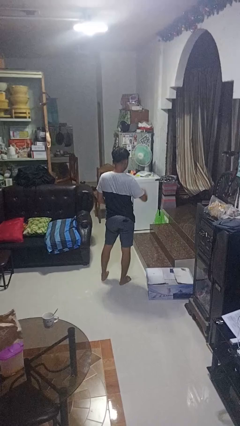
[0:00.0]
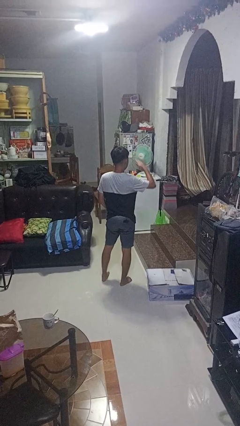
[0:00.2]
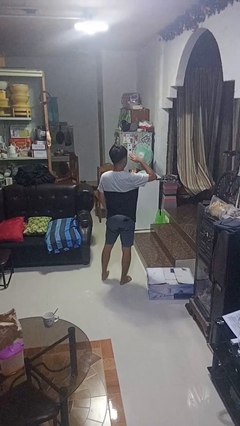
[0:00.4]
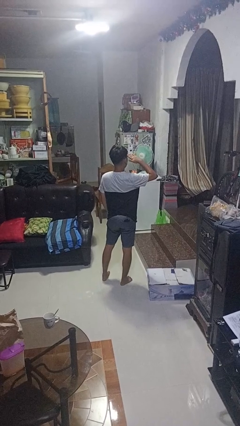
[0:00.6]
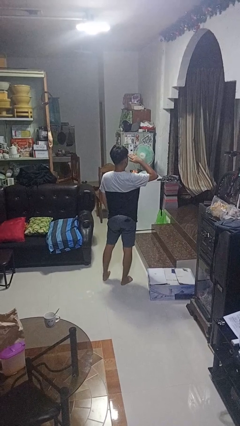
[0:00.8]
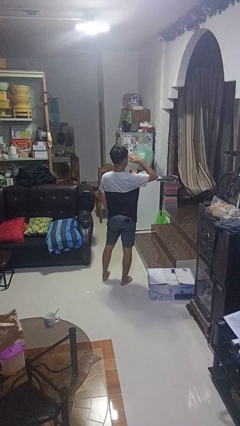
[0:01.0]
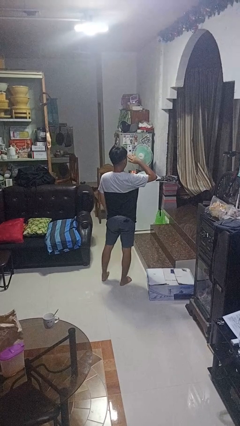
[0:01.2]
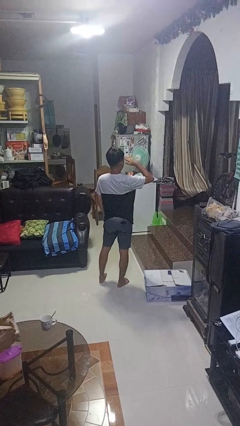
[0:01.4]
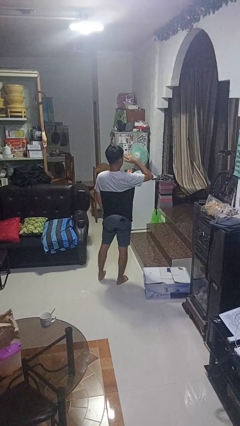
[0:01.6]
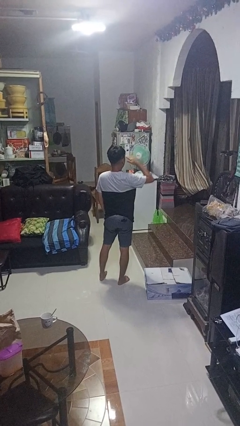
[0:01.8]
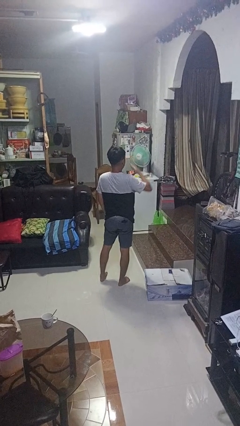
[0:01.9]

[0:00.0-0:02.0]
person salutes

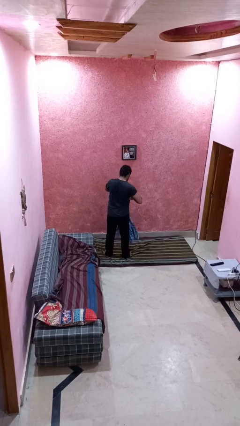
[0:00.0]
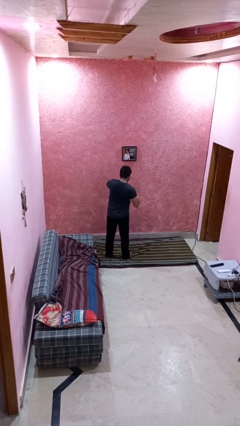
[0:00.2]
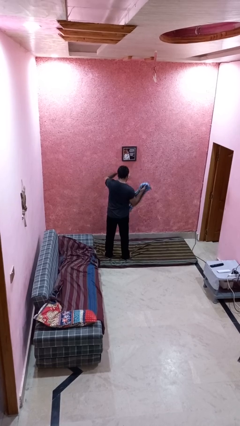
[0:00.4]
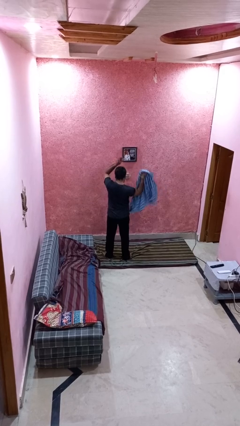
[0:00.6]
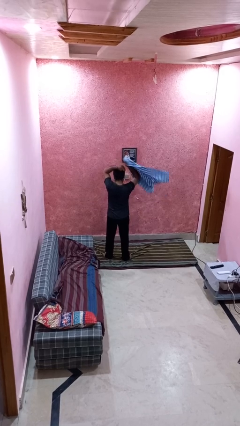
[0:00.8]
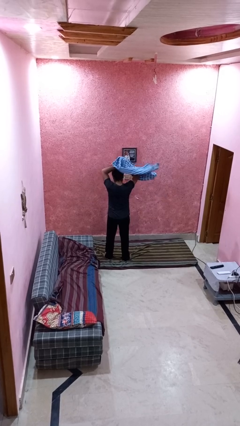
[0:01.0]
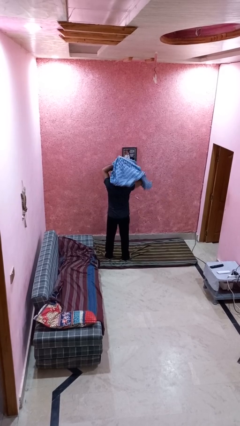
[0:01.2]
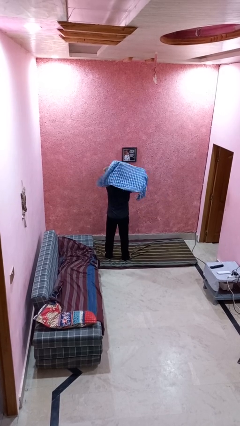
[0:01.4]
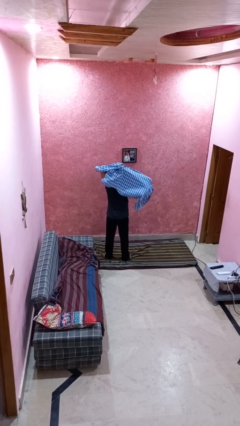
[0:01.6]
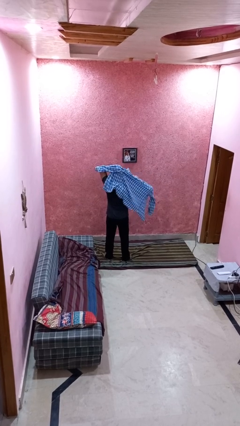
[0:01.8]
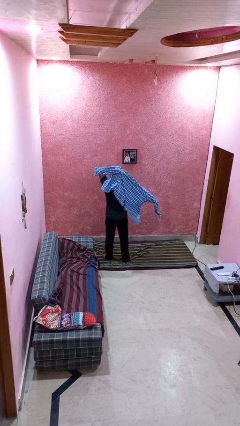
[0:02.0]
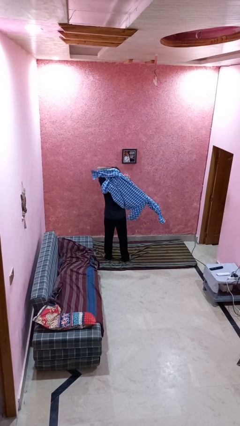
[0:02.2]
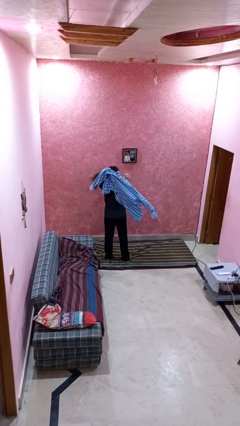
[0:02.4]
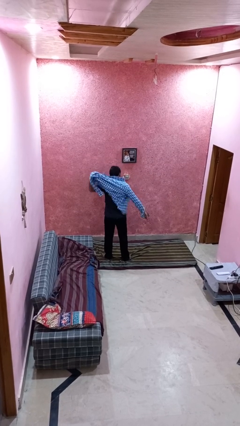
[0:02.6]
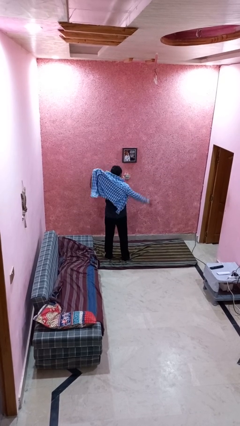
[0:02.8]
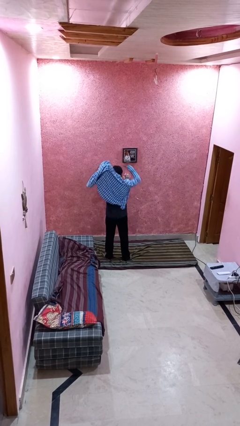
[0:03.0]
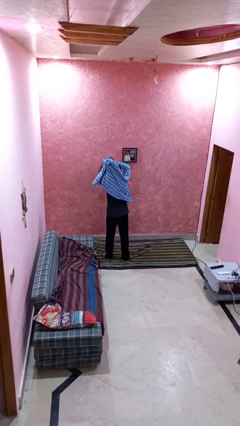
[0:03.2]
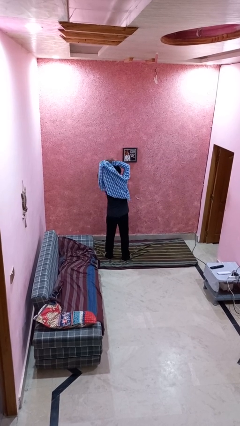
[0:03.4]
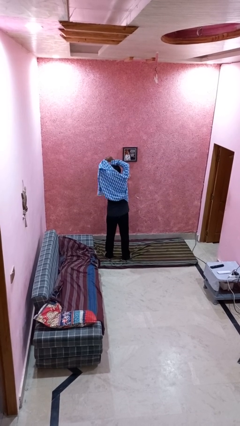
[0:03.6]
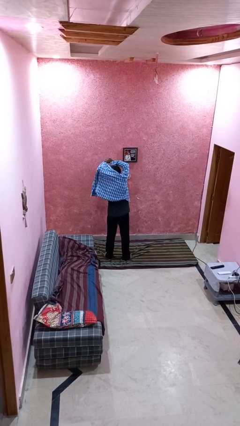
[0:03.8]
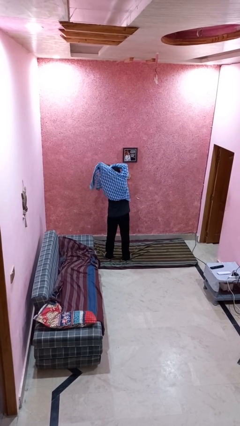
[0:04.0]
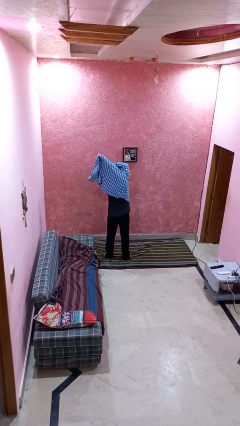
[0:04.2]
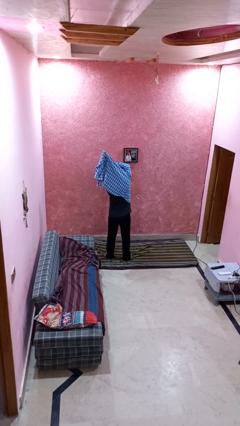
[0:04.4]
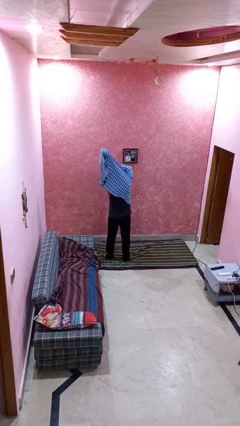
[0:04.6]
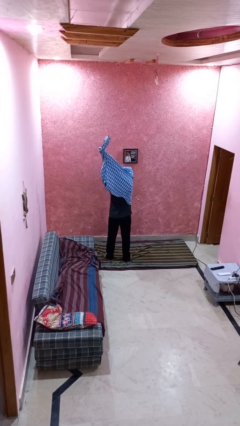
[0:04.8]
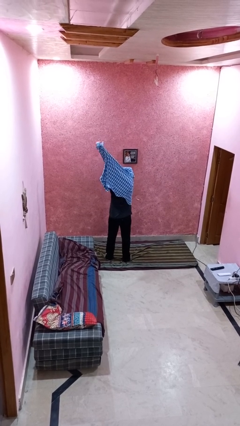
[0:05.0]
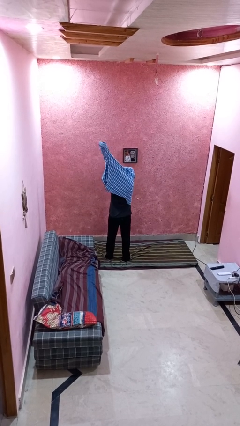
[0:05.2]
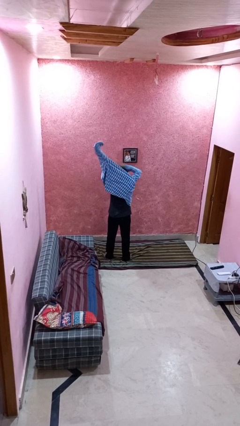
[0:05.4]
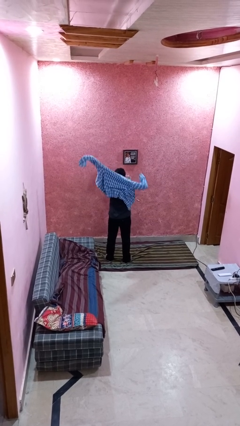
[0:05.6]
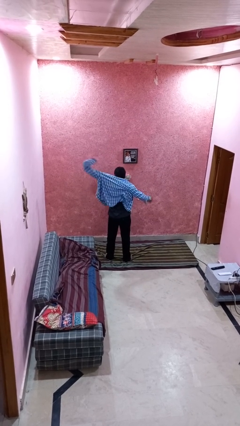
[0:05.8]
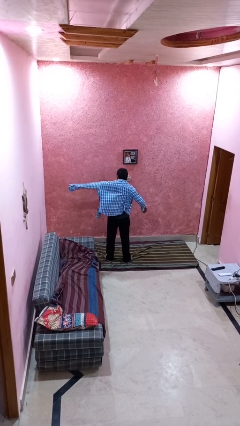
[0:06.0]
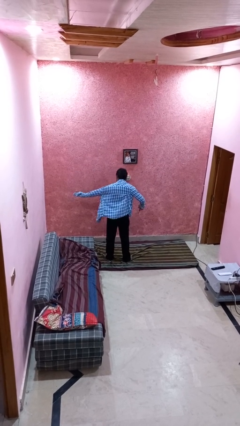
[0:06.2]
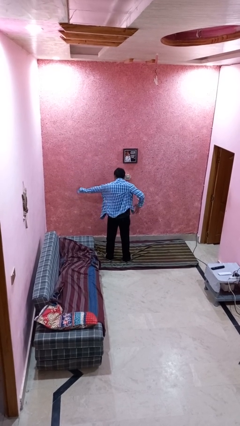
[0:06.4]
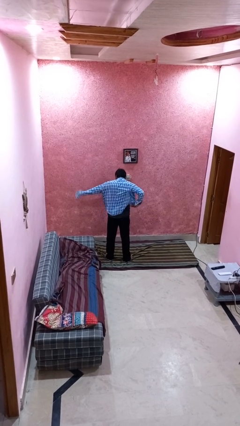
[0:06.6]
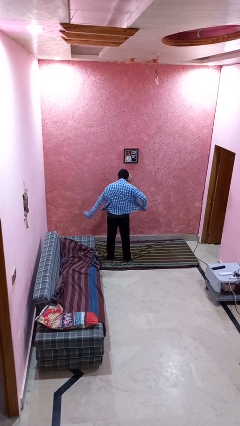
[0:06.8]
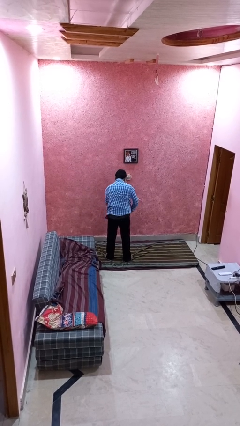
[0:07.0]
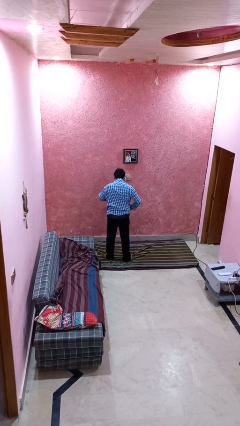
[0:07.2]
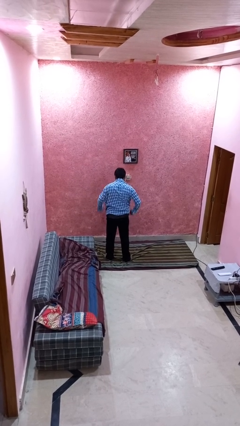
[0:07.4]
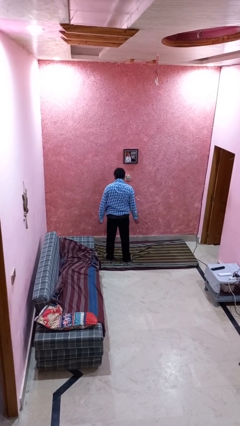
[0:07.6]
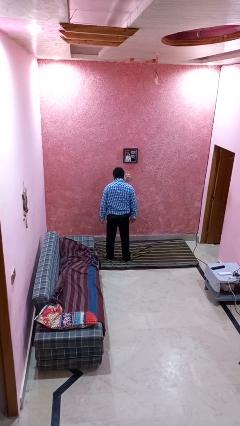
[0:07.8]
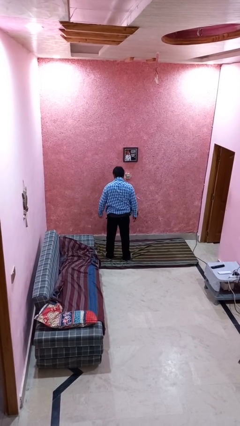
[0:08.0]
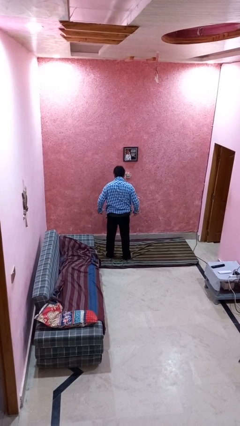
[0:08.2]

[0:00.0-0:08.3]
person puts on shirt

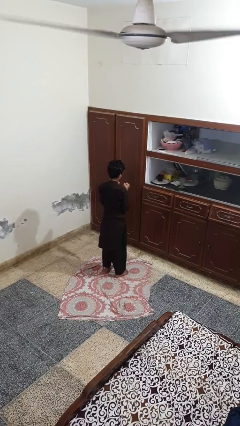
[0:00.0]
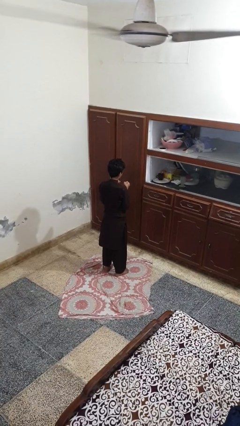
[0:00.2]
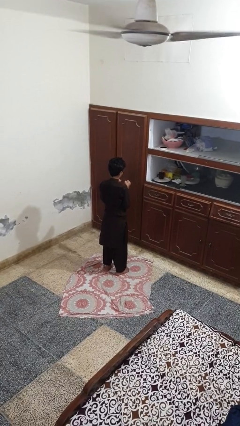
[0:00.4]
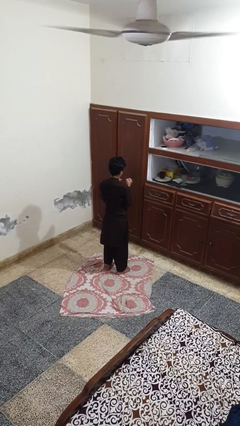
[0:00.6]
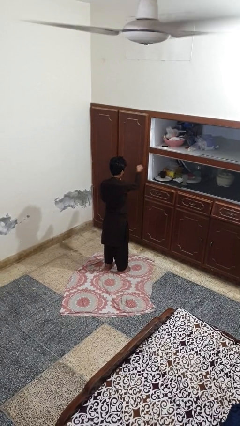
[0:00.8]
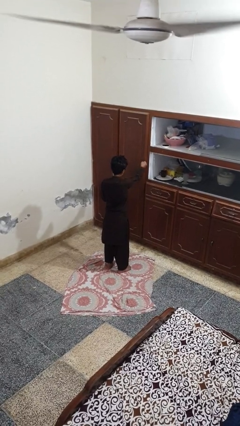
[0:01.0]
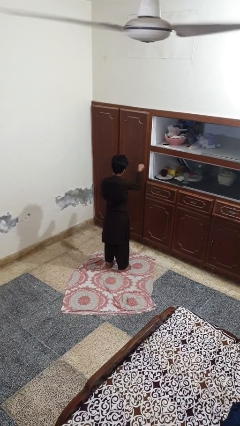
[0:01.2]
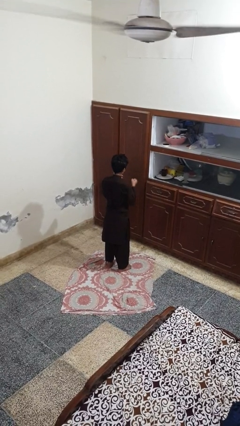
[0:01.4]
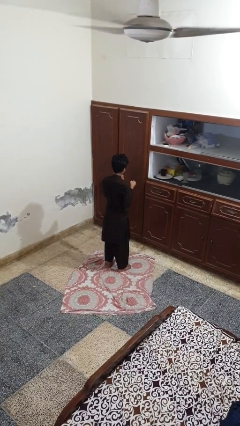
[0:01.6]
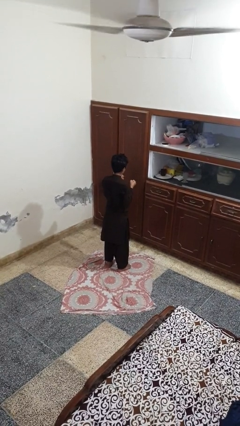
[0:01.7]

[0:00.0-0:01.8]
person punches

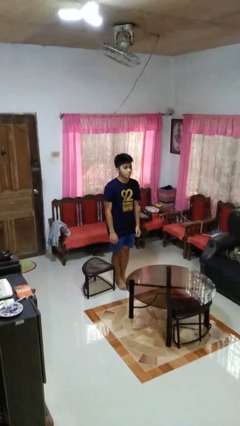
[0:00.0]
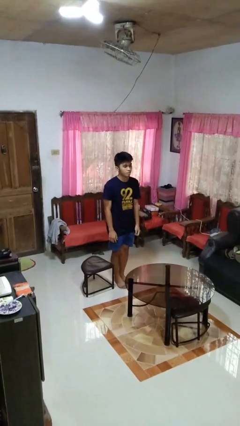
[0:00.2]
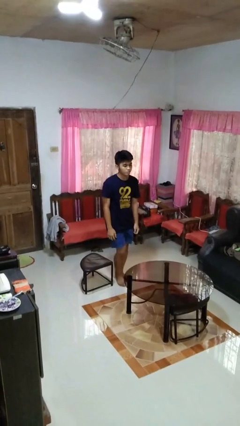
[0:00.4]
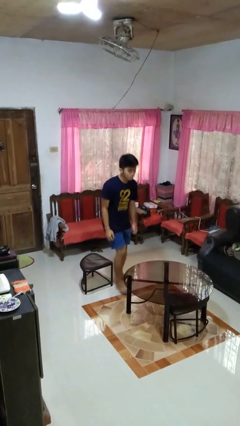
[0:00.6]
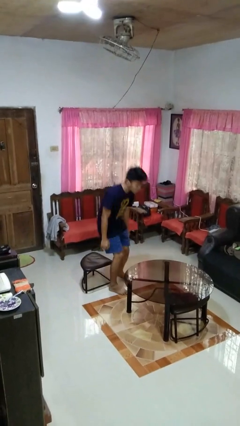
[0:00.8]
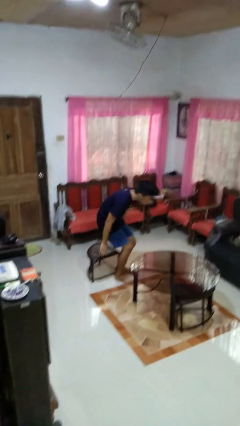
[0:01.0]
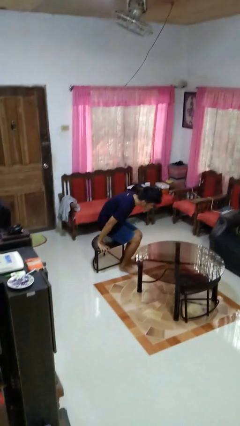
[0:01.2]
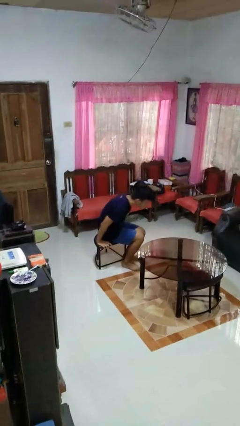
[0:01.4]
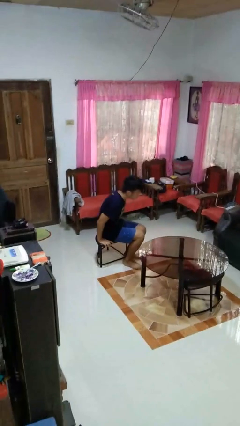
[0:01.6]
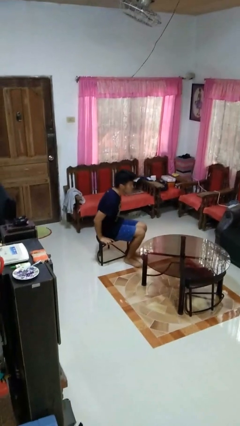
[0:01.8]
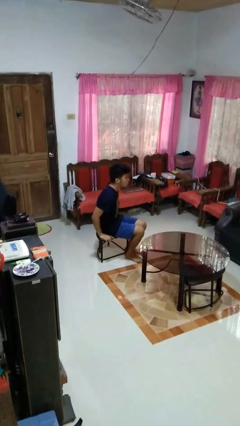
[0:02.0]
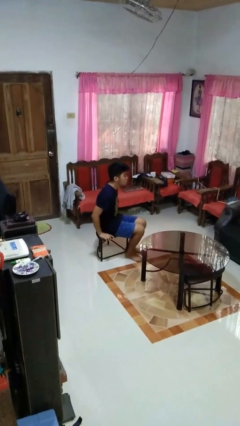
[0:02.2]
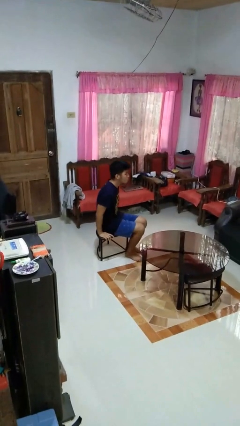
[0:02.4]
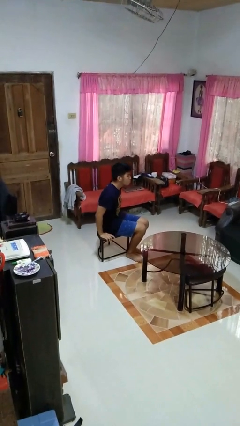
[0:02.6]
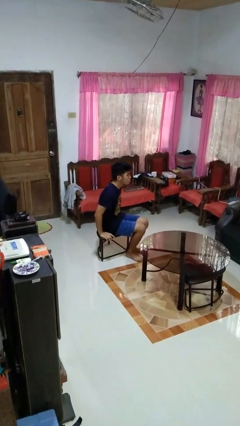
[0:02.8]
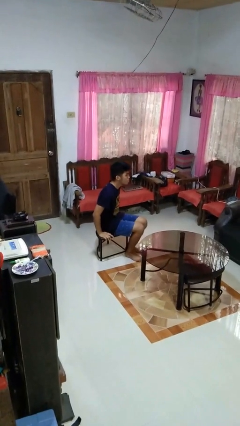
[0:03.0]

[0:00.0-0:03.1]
person sits down

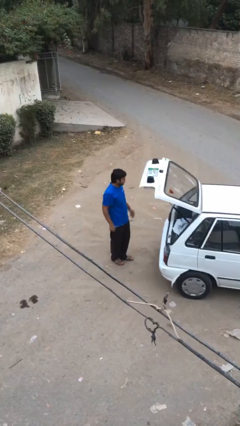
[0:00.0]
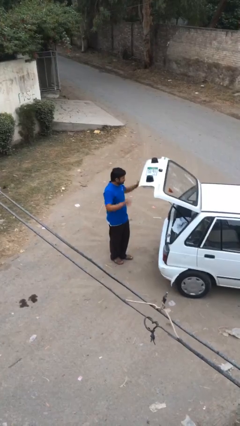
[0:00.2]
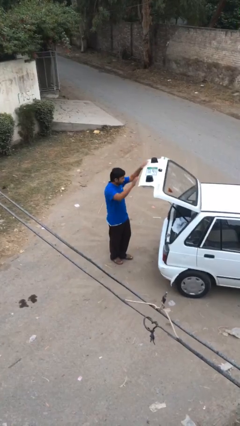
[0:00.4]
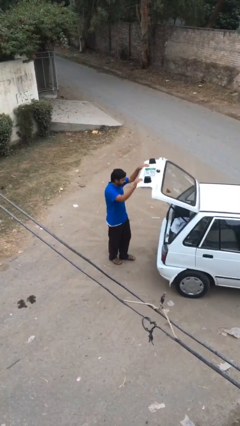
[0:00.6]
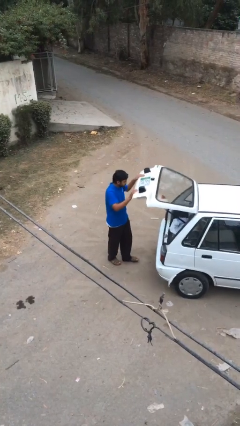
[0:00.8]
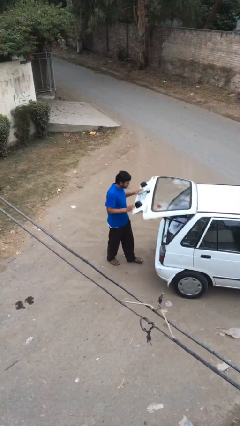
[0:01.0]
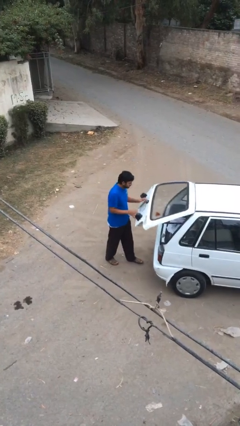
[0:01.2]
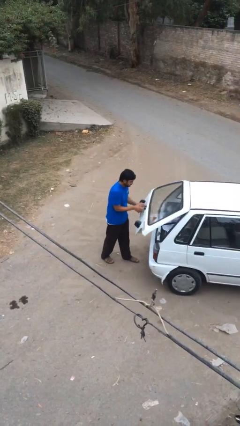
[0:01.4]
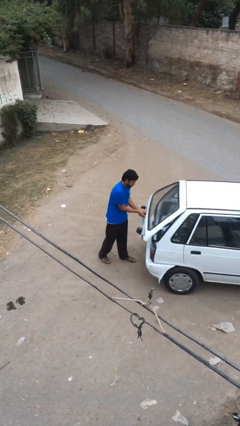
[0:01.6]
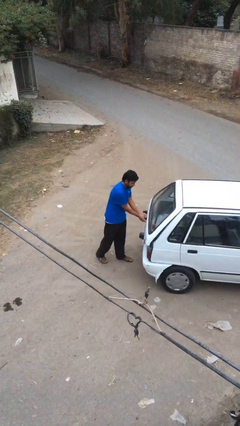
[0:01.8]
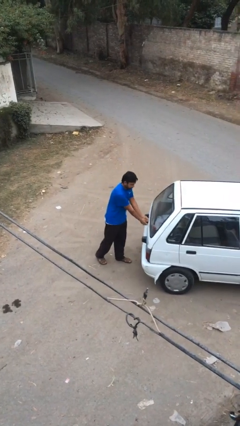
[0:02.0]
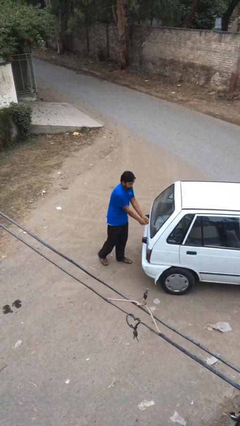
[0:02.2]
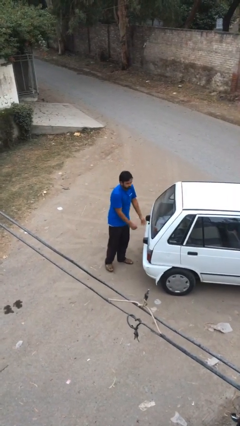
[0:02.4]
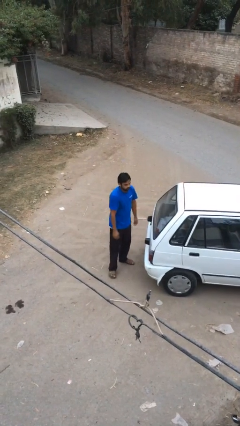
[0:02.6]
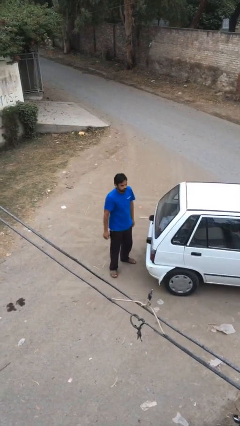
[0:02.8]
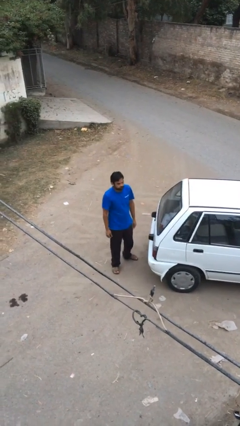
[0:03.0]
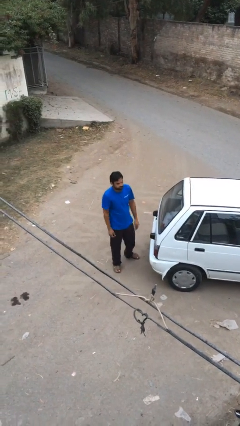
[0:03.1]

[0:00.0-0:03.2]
person closes car trunk
